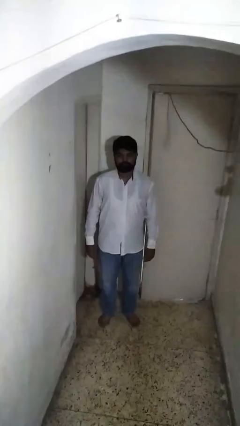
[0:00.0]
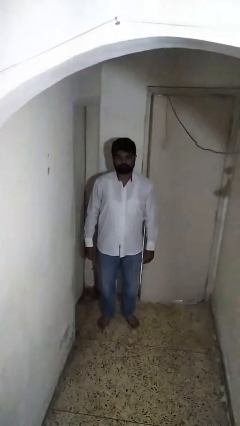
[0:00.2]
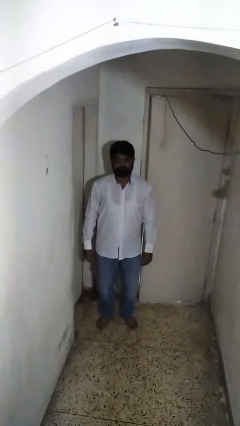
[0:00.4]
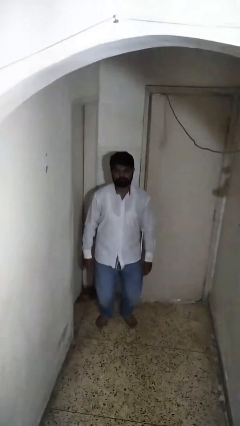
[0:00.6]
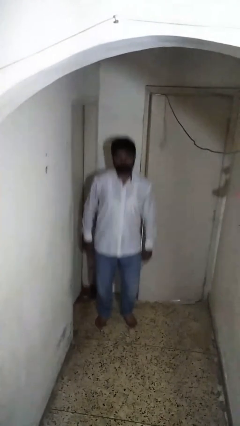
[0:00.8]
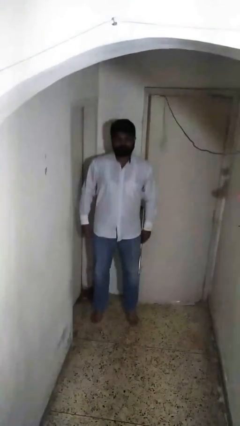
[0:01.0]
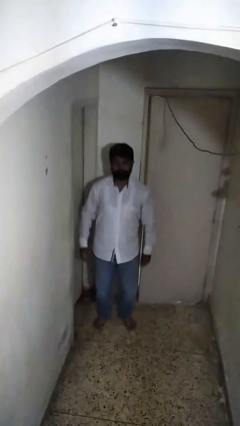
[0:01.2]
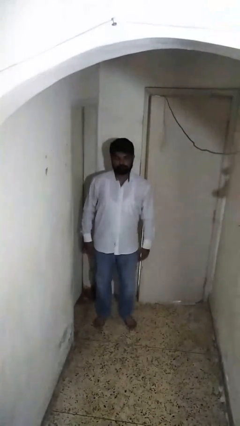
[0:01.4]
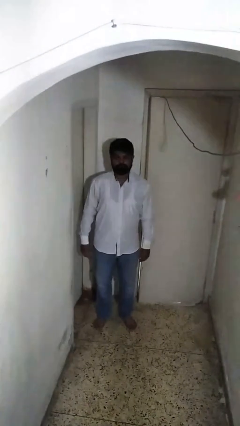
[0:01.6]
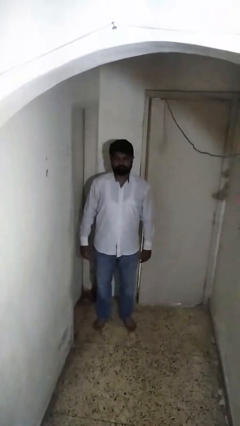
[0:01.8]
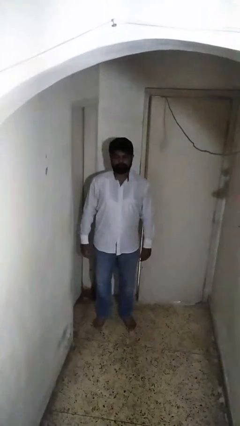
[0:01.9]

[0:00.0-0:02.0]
person jumps

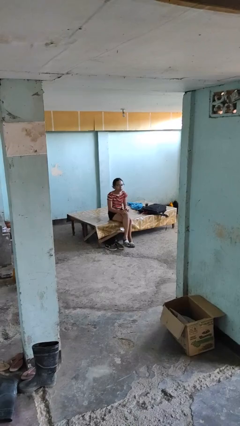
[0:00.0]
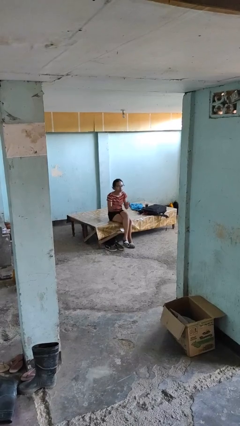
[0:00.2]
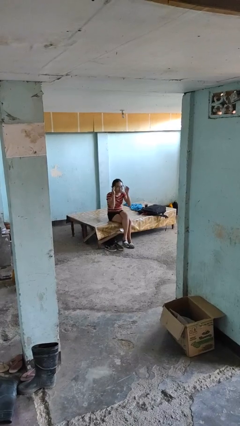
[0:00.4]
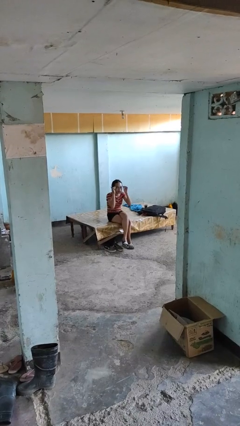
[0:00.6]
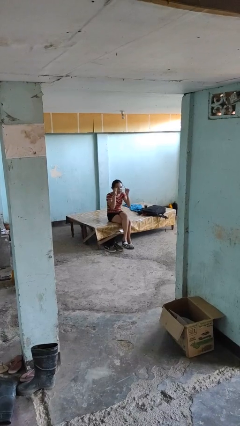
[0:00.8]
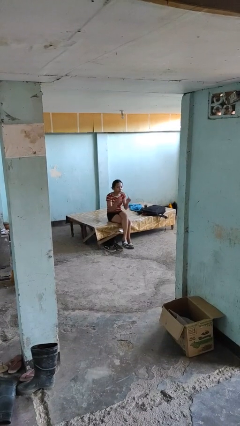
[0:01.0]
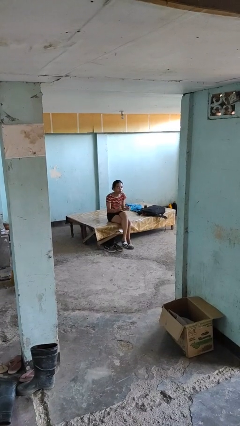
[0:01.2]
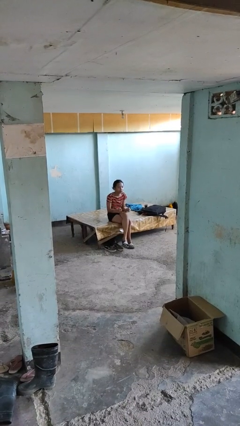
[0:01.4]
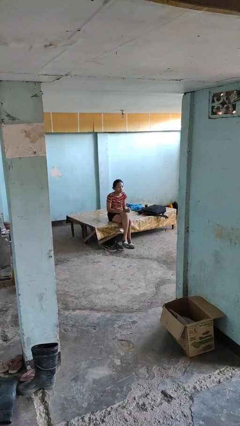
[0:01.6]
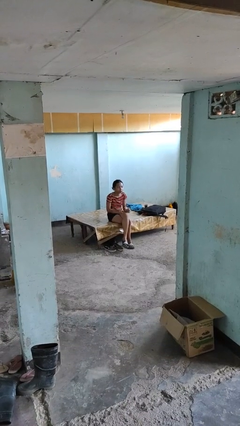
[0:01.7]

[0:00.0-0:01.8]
person takes off glasses

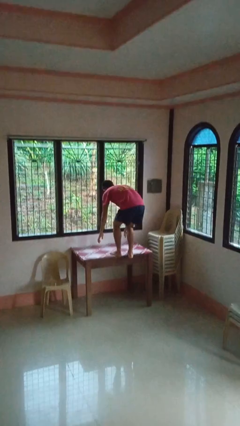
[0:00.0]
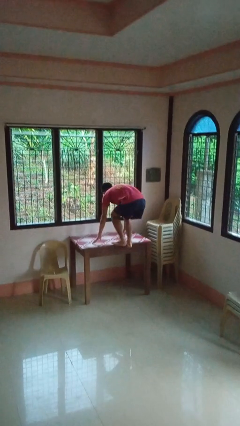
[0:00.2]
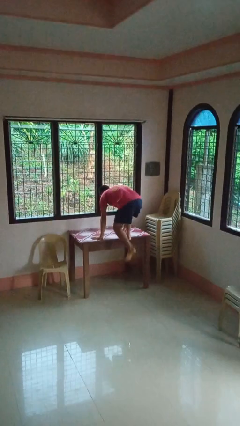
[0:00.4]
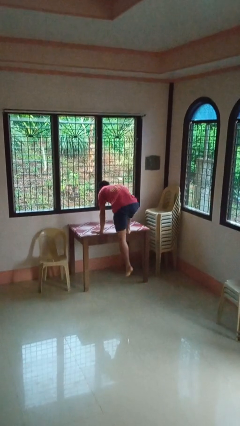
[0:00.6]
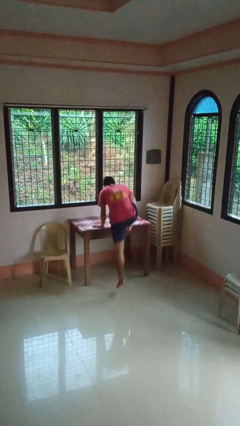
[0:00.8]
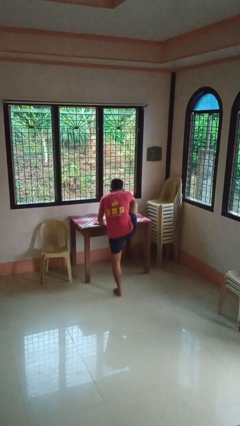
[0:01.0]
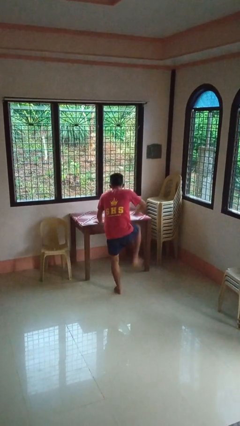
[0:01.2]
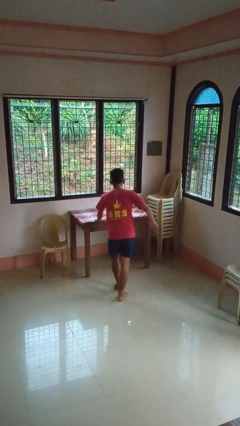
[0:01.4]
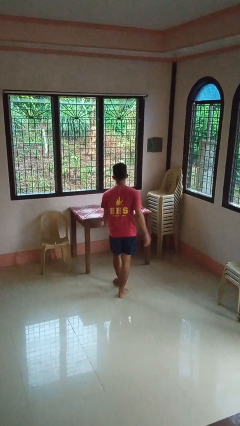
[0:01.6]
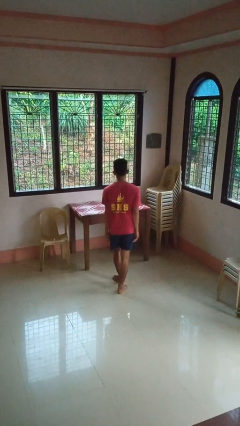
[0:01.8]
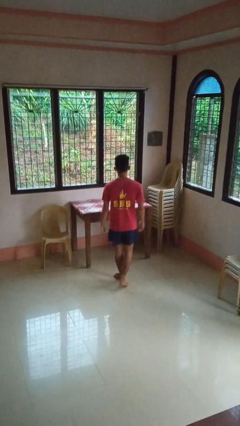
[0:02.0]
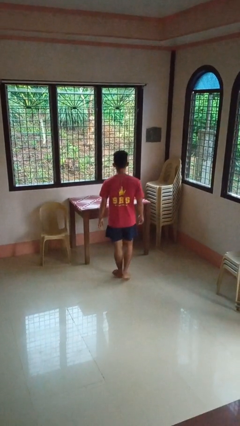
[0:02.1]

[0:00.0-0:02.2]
person climbs off table

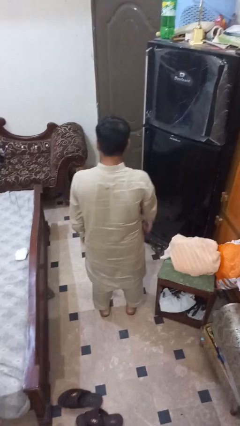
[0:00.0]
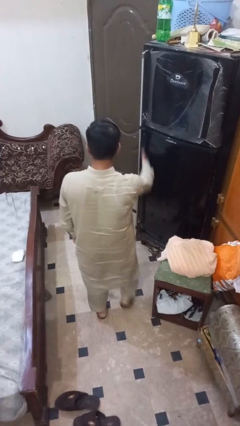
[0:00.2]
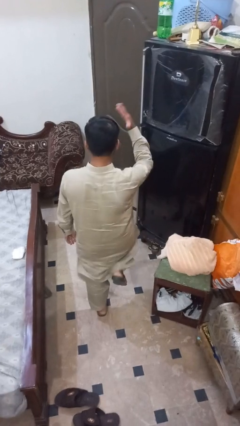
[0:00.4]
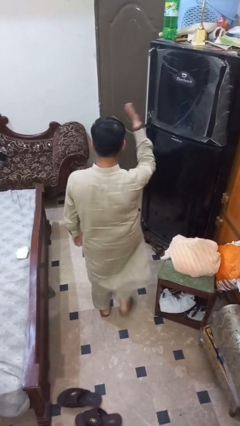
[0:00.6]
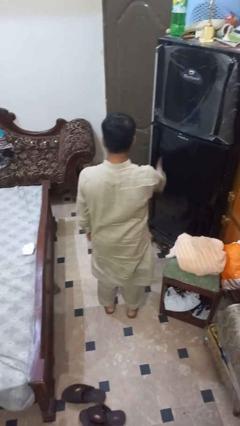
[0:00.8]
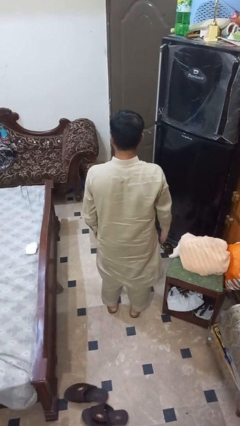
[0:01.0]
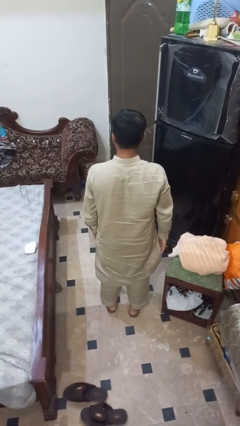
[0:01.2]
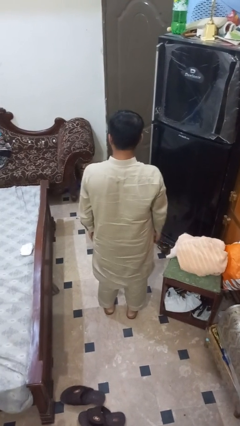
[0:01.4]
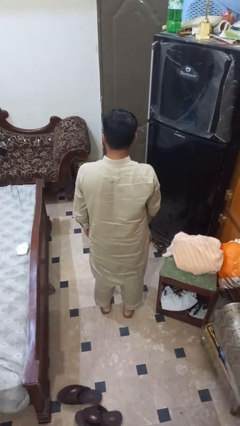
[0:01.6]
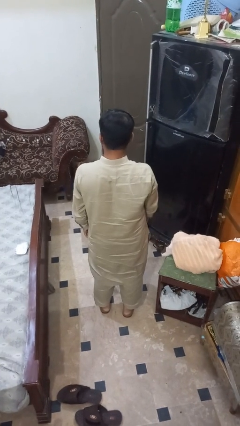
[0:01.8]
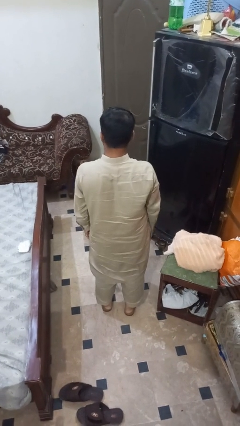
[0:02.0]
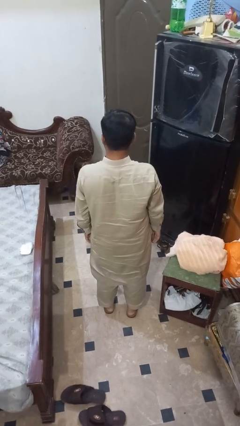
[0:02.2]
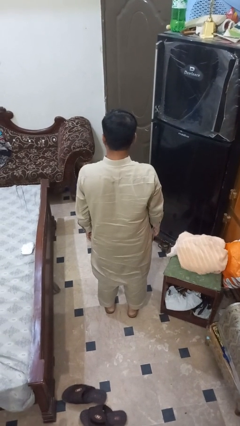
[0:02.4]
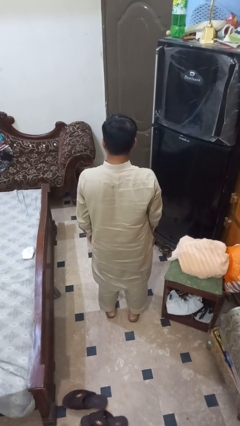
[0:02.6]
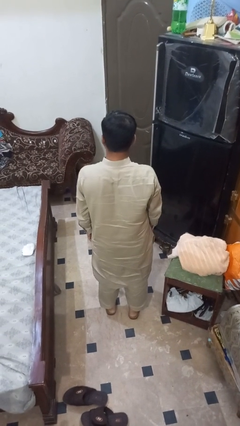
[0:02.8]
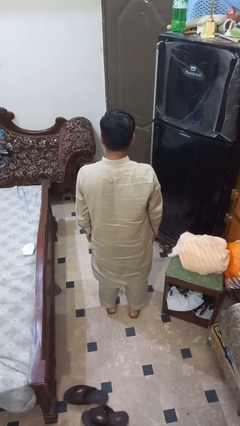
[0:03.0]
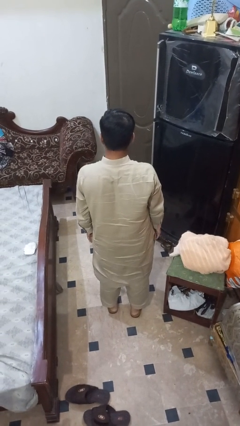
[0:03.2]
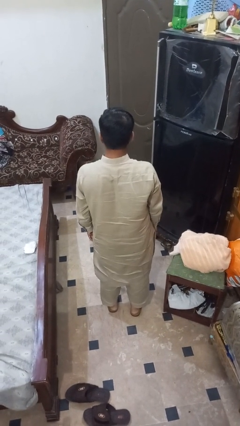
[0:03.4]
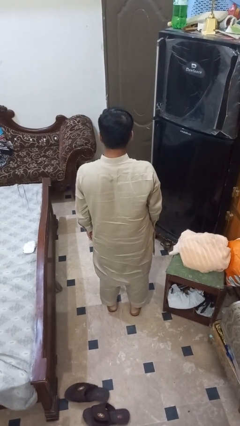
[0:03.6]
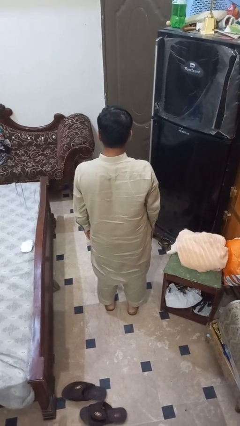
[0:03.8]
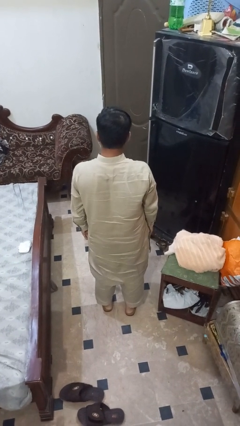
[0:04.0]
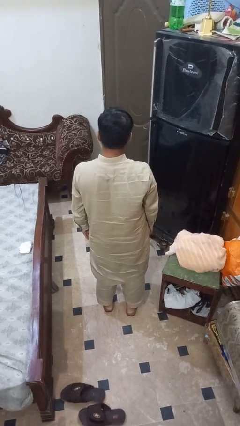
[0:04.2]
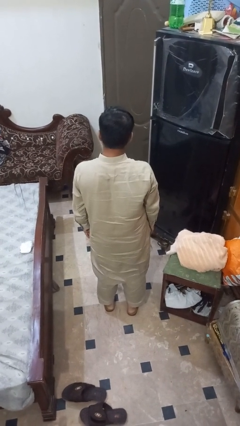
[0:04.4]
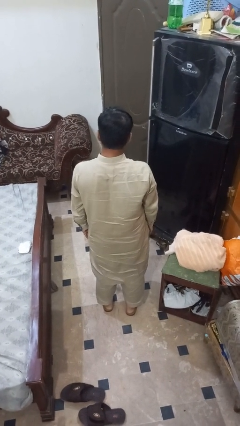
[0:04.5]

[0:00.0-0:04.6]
person salutes

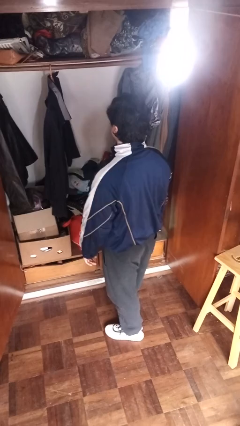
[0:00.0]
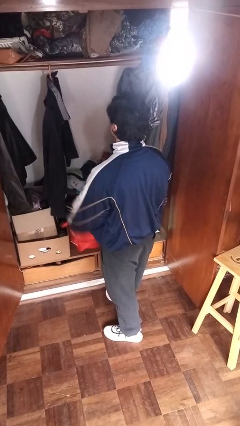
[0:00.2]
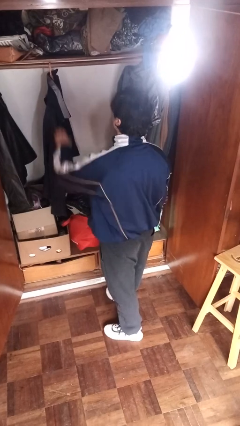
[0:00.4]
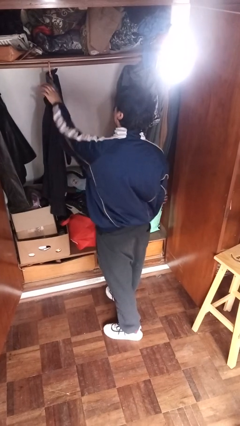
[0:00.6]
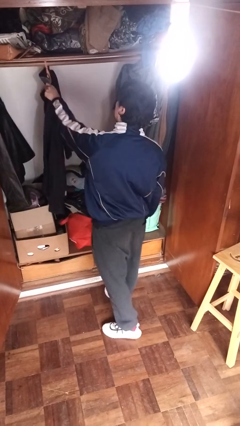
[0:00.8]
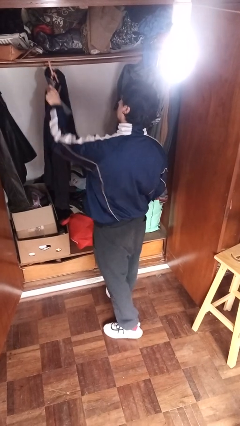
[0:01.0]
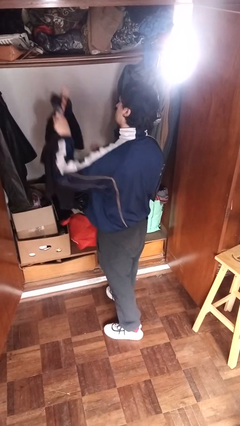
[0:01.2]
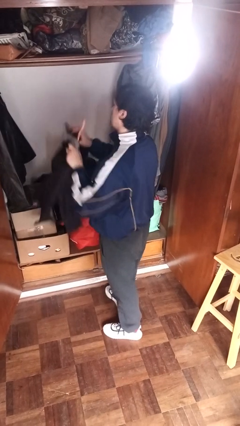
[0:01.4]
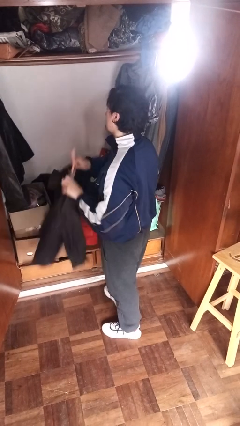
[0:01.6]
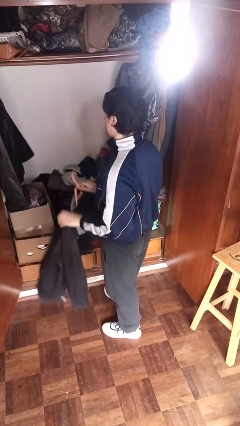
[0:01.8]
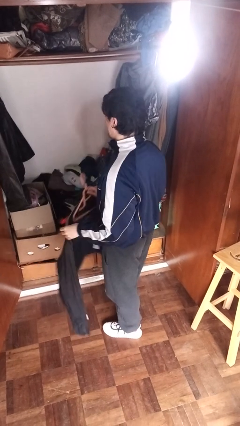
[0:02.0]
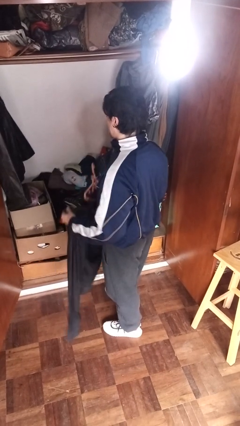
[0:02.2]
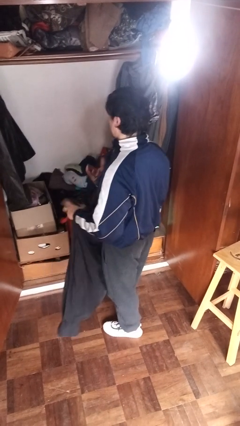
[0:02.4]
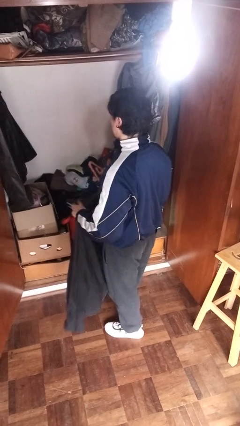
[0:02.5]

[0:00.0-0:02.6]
person takes clothes from closet

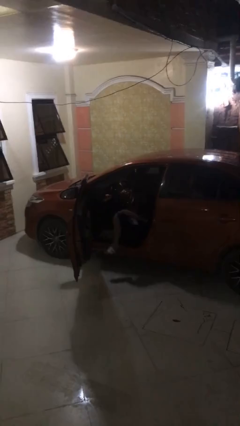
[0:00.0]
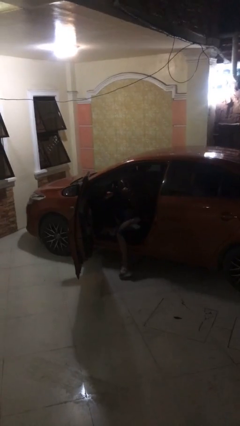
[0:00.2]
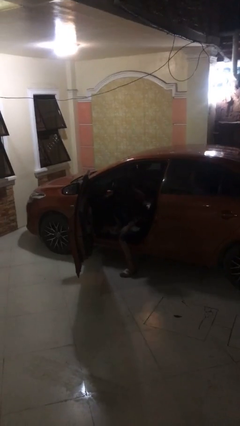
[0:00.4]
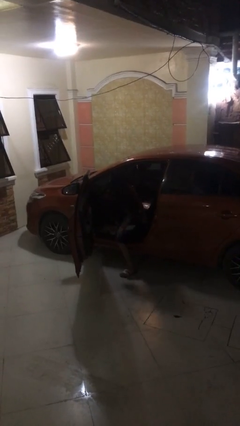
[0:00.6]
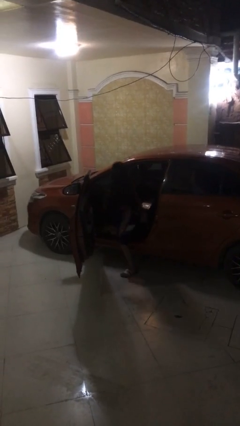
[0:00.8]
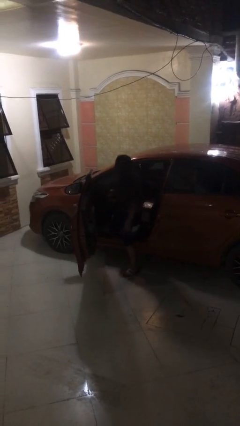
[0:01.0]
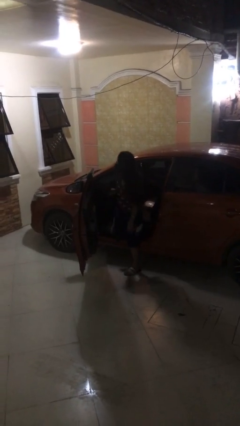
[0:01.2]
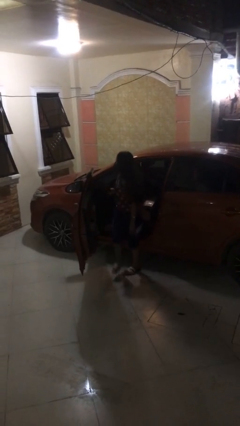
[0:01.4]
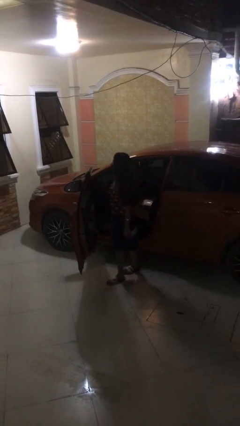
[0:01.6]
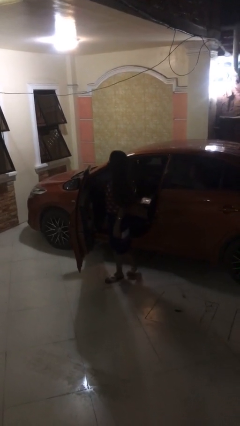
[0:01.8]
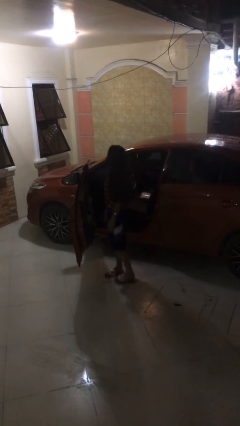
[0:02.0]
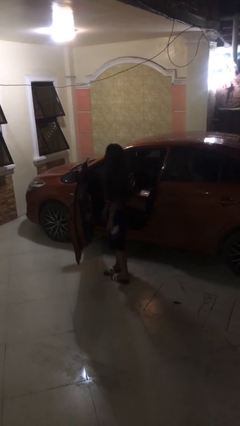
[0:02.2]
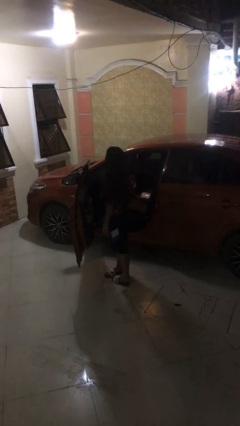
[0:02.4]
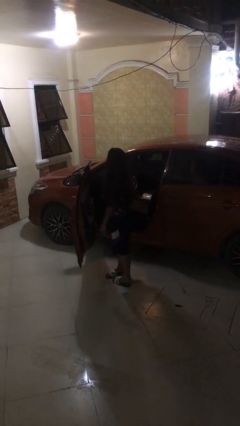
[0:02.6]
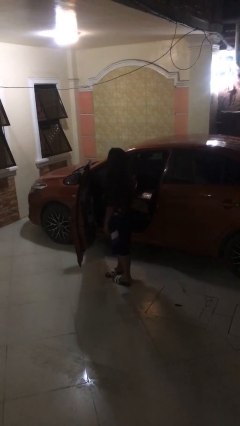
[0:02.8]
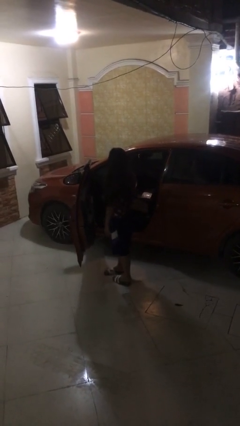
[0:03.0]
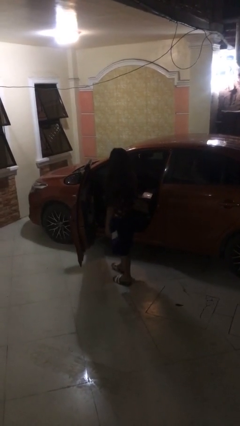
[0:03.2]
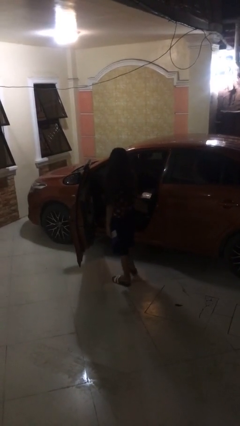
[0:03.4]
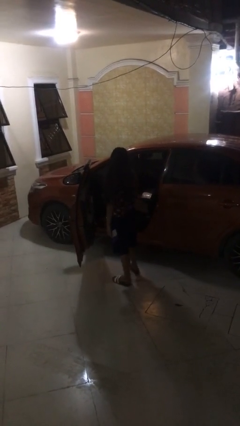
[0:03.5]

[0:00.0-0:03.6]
person exits car

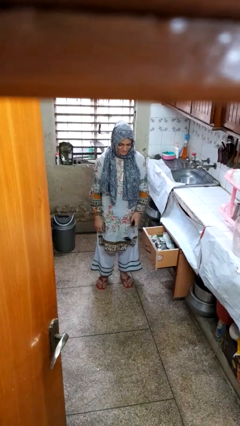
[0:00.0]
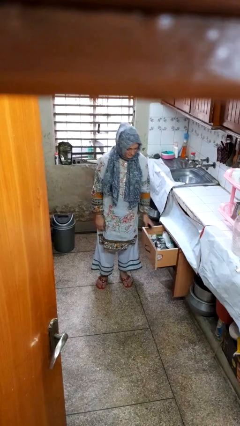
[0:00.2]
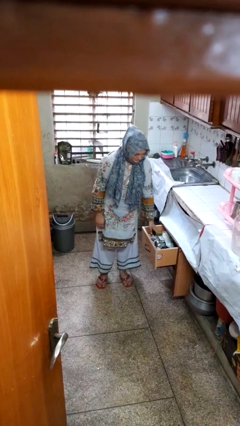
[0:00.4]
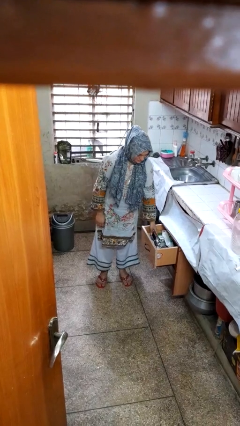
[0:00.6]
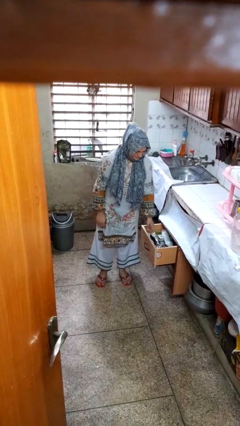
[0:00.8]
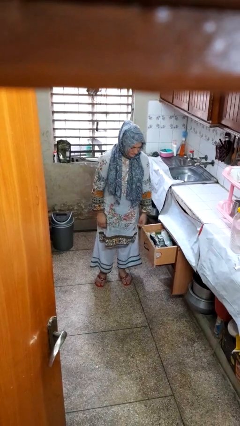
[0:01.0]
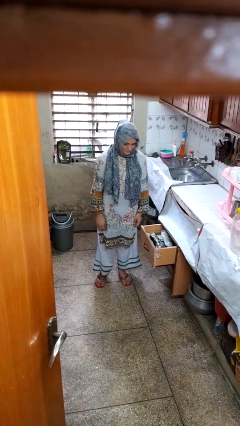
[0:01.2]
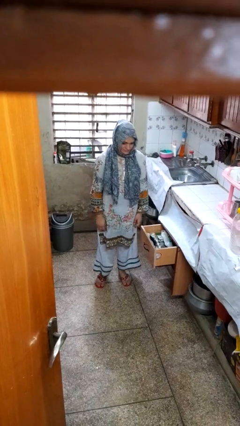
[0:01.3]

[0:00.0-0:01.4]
person puts object into kitchen drawer
